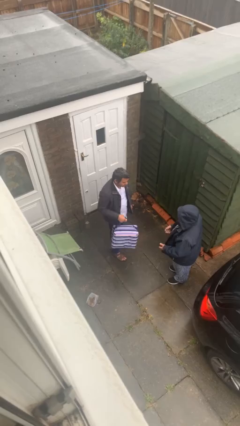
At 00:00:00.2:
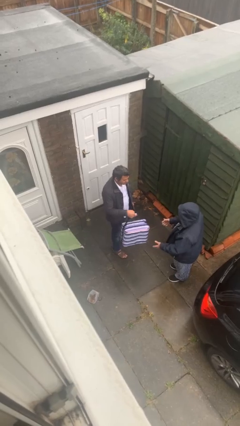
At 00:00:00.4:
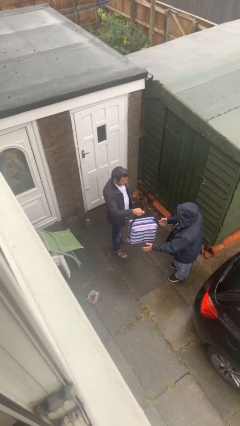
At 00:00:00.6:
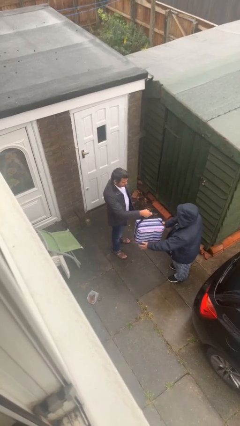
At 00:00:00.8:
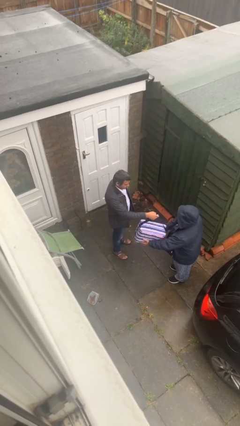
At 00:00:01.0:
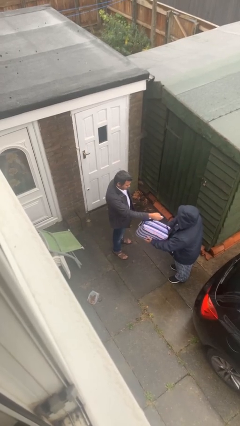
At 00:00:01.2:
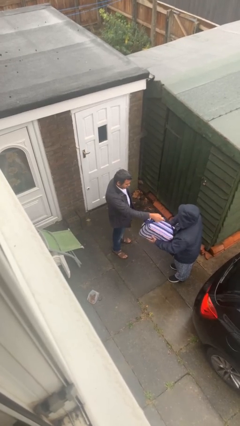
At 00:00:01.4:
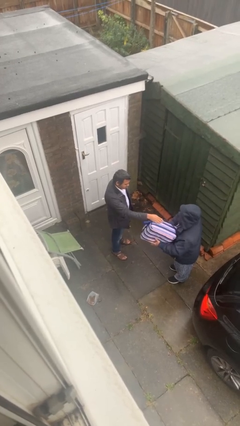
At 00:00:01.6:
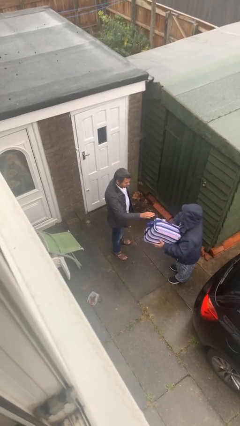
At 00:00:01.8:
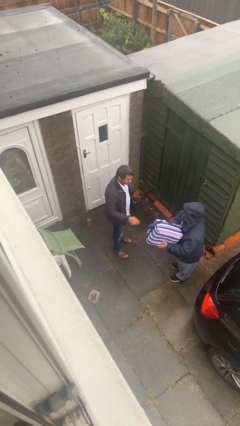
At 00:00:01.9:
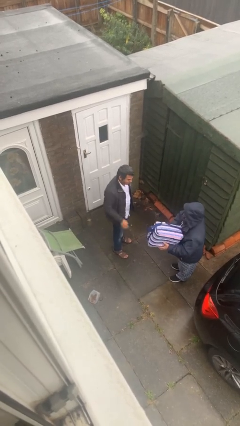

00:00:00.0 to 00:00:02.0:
person transfers object to person

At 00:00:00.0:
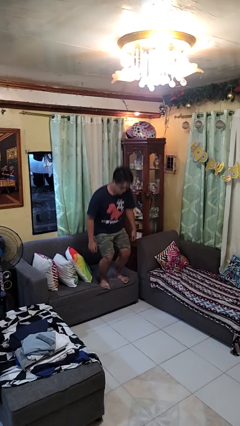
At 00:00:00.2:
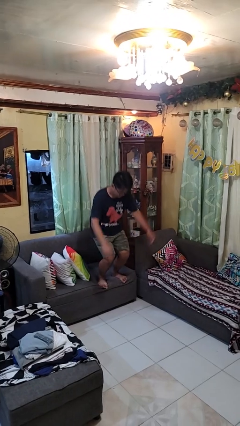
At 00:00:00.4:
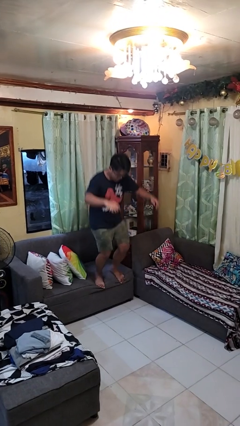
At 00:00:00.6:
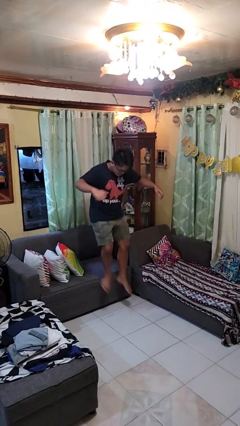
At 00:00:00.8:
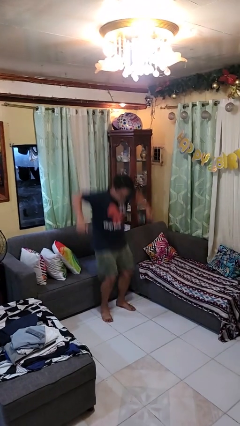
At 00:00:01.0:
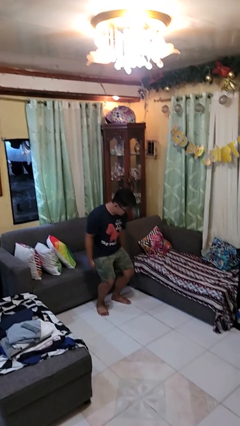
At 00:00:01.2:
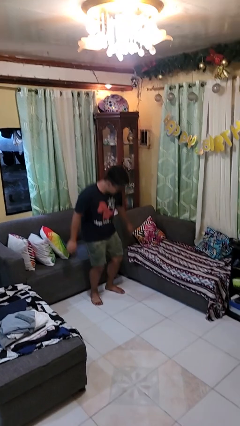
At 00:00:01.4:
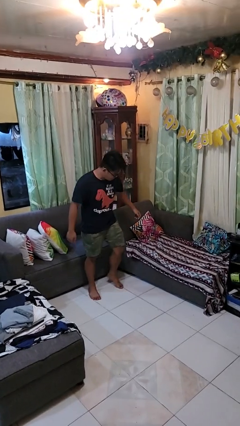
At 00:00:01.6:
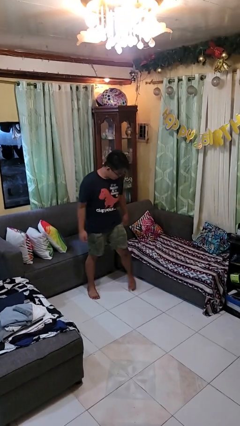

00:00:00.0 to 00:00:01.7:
person jumps on couch

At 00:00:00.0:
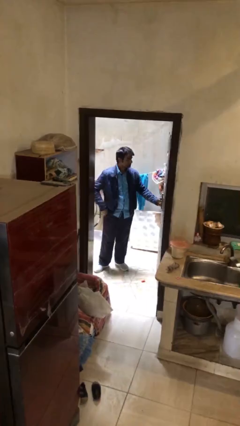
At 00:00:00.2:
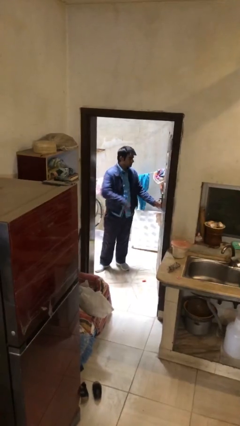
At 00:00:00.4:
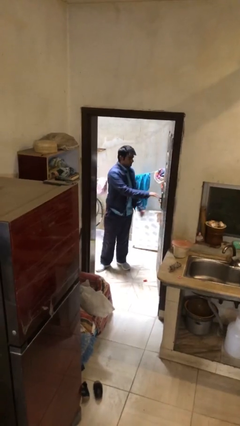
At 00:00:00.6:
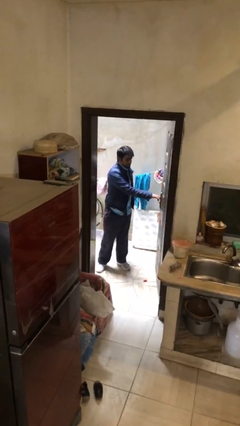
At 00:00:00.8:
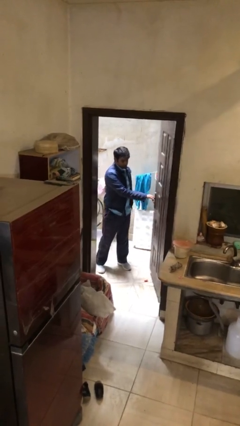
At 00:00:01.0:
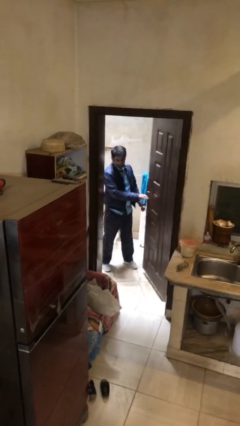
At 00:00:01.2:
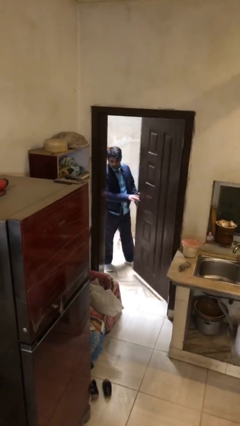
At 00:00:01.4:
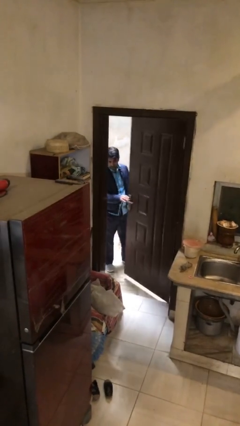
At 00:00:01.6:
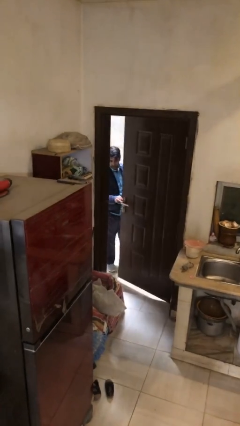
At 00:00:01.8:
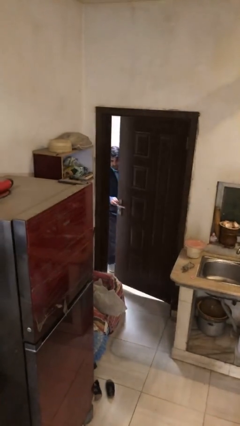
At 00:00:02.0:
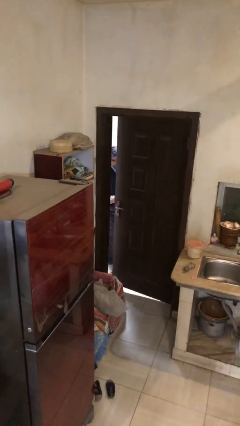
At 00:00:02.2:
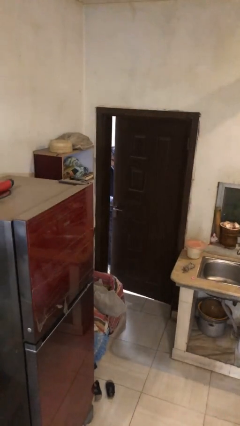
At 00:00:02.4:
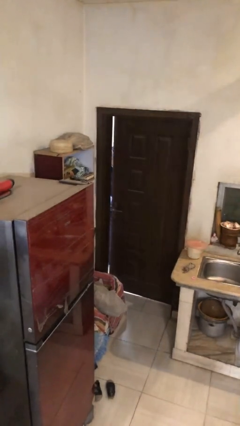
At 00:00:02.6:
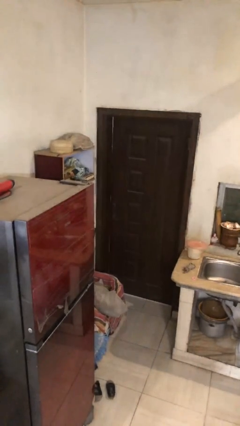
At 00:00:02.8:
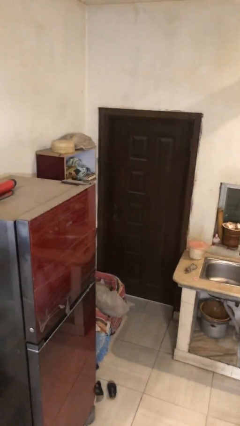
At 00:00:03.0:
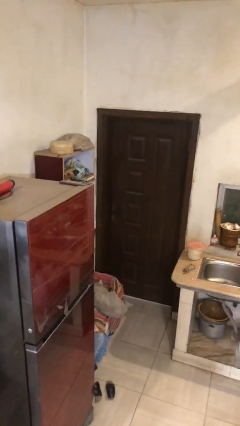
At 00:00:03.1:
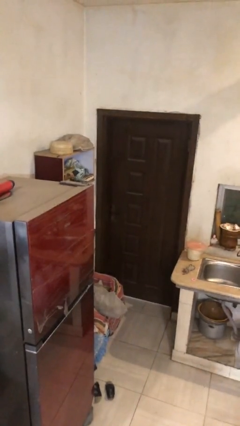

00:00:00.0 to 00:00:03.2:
person closes facility door

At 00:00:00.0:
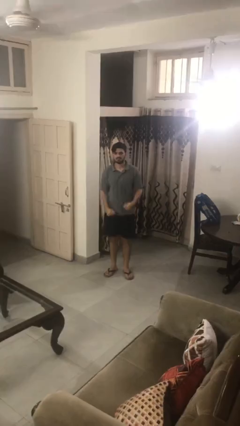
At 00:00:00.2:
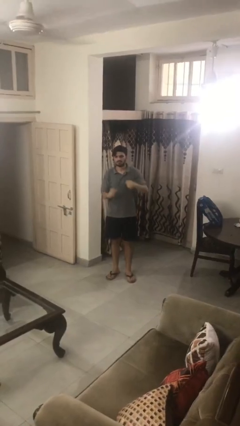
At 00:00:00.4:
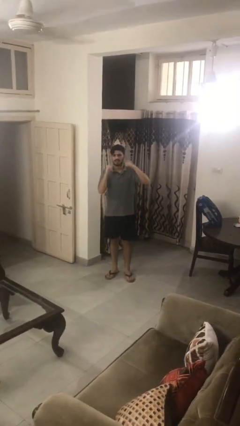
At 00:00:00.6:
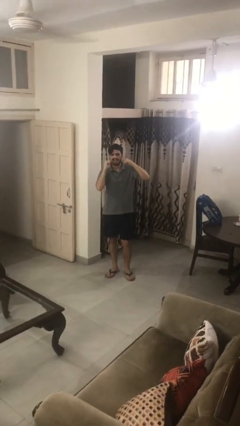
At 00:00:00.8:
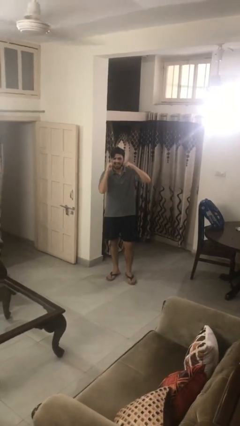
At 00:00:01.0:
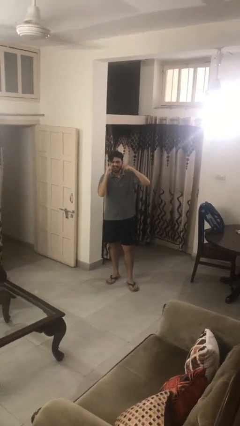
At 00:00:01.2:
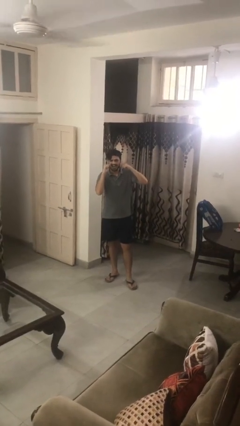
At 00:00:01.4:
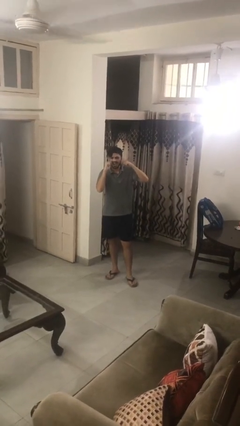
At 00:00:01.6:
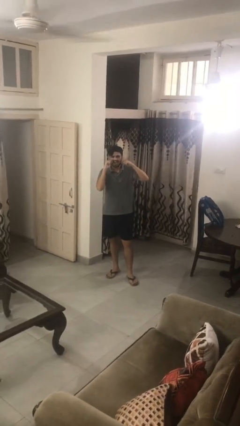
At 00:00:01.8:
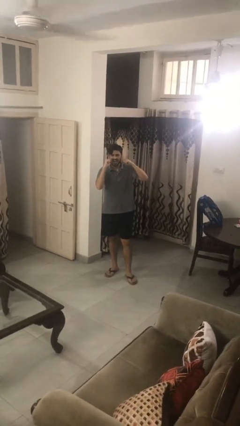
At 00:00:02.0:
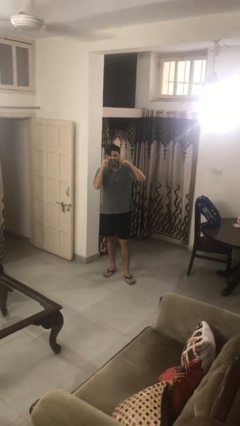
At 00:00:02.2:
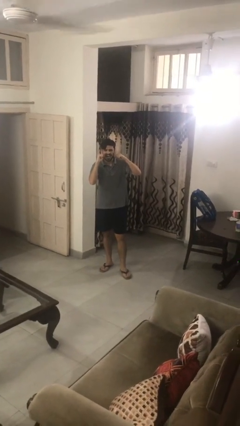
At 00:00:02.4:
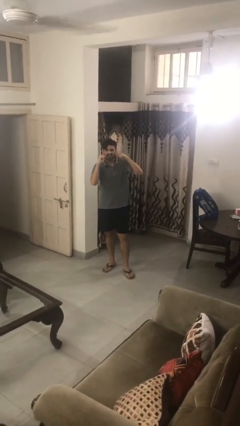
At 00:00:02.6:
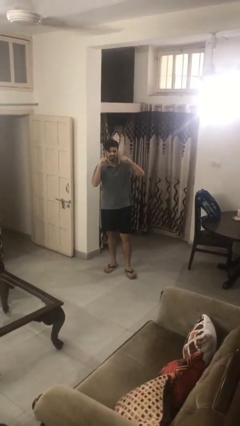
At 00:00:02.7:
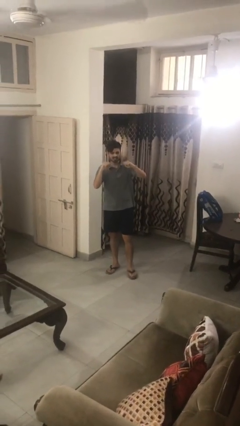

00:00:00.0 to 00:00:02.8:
person flosses

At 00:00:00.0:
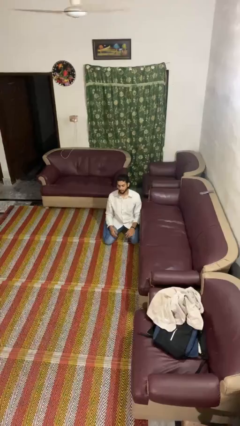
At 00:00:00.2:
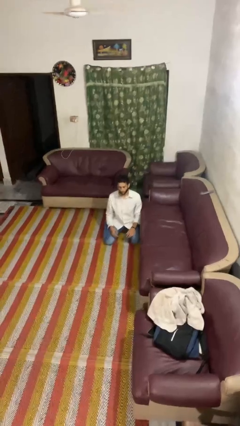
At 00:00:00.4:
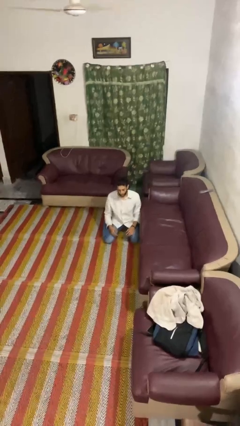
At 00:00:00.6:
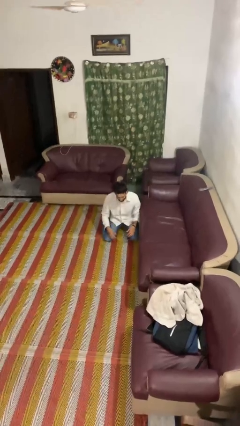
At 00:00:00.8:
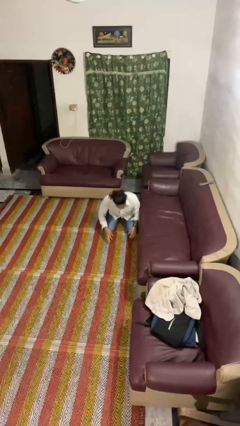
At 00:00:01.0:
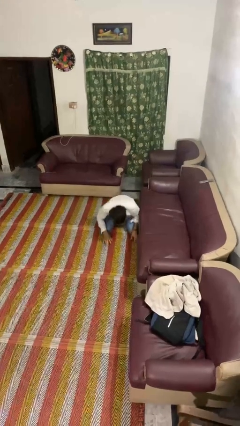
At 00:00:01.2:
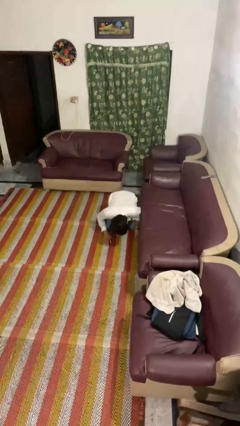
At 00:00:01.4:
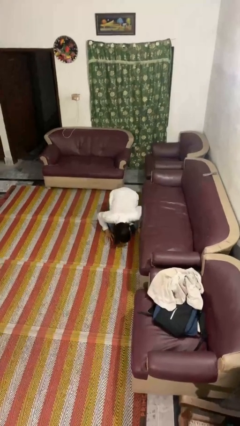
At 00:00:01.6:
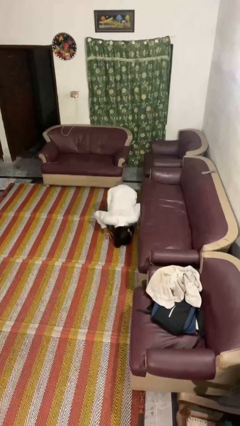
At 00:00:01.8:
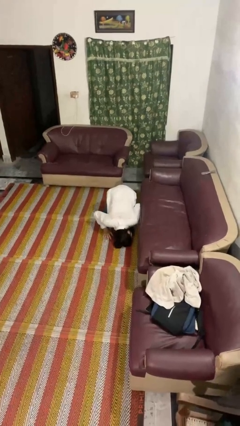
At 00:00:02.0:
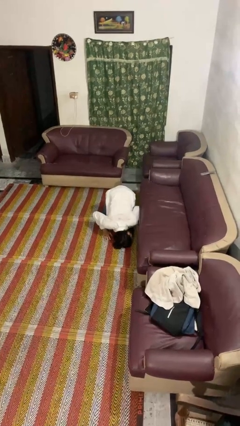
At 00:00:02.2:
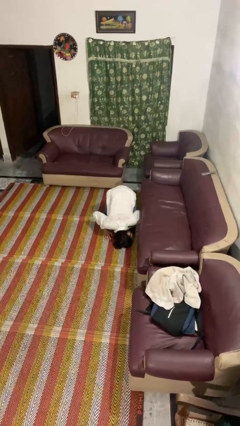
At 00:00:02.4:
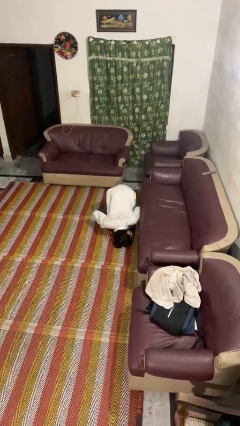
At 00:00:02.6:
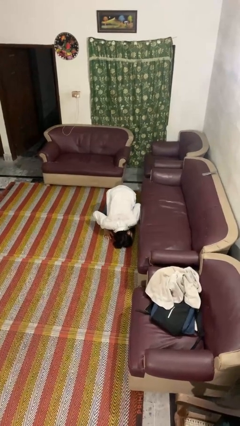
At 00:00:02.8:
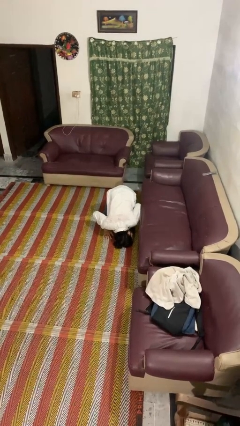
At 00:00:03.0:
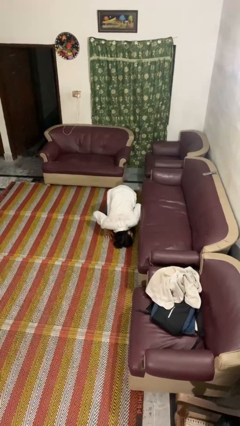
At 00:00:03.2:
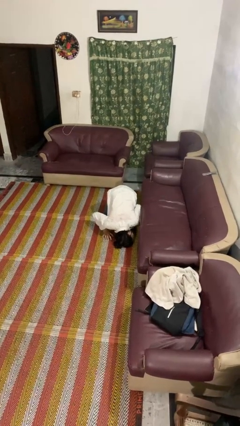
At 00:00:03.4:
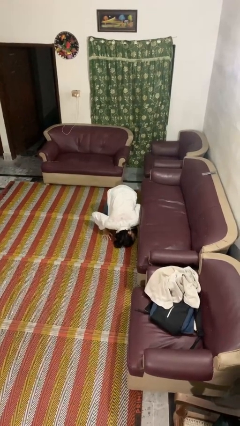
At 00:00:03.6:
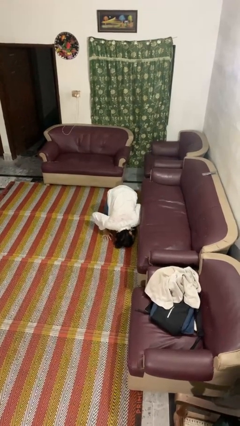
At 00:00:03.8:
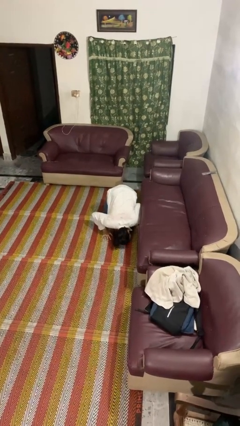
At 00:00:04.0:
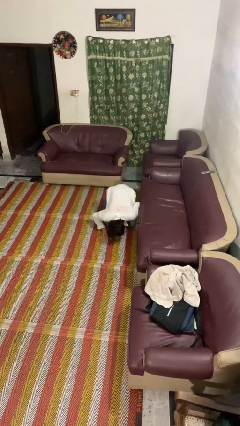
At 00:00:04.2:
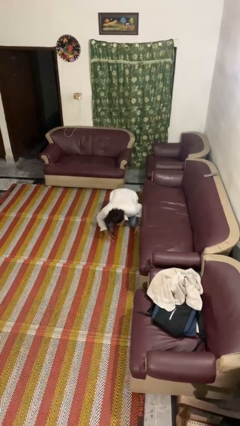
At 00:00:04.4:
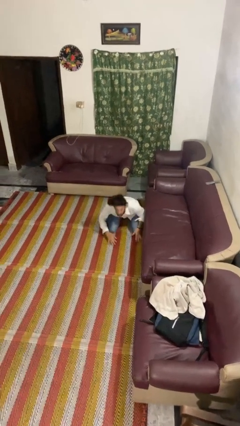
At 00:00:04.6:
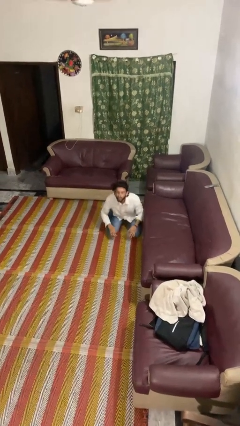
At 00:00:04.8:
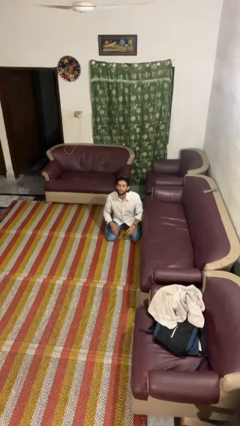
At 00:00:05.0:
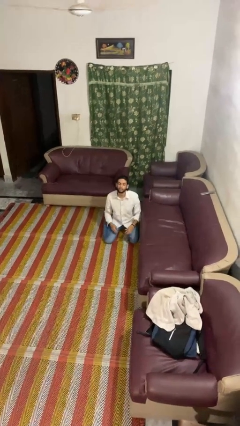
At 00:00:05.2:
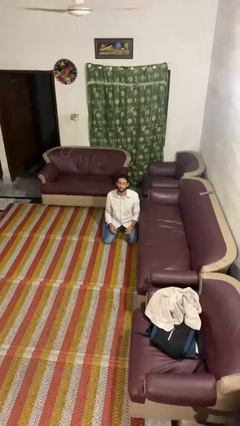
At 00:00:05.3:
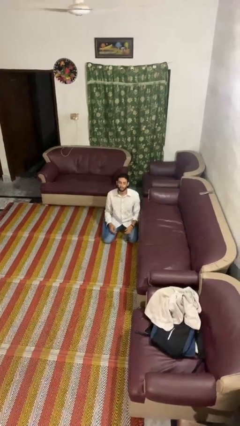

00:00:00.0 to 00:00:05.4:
person searches under couch

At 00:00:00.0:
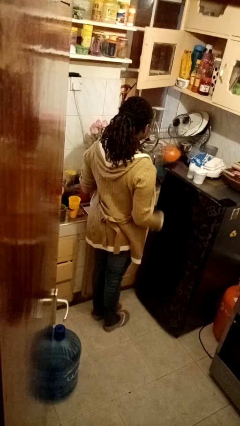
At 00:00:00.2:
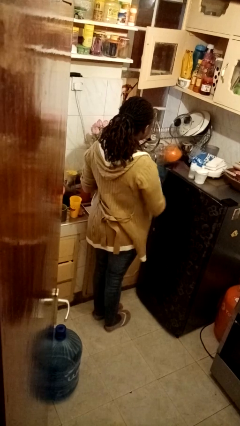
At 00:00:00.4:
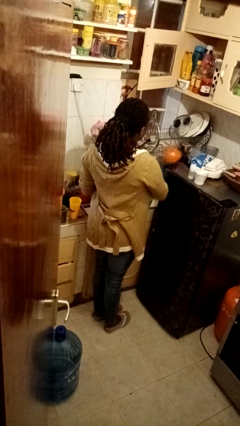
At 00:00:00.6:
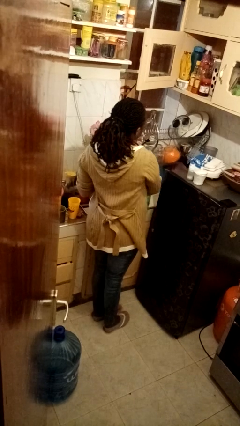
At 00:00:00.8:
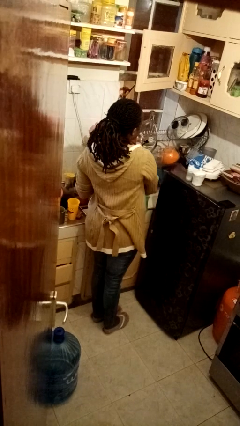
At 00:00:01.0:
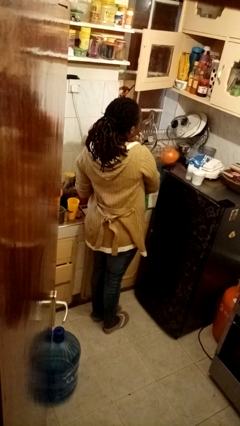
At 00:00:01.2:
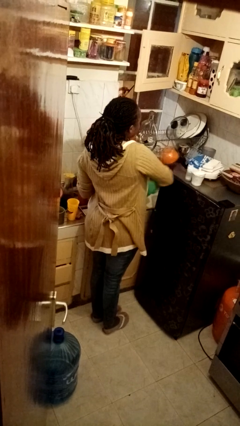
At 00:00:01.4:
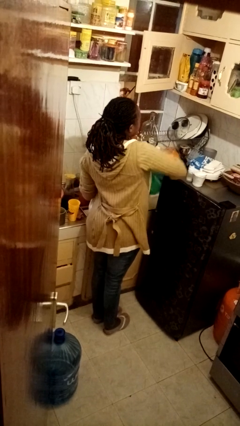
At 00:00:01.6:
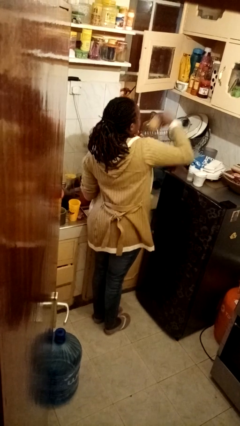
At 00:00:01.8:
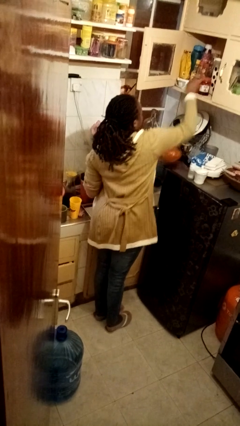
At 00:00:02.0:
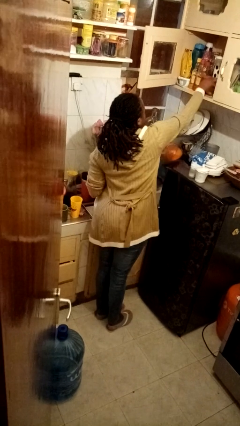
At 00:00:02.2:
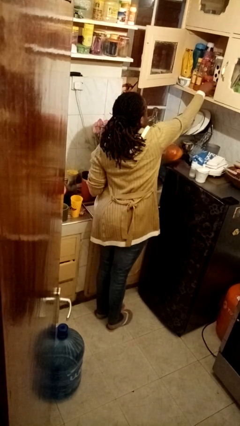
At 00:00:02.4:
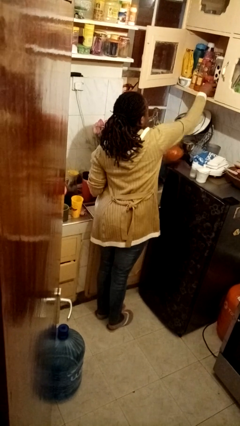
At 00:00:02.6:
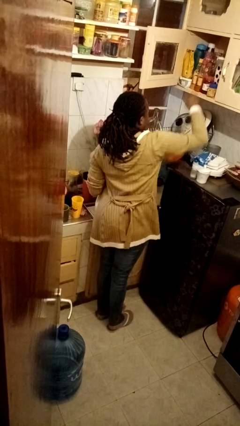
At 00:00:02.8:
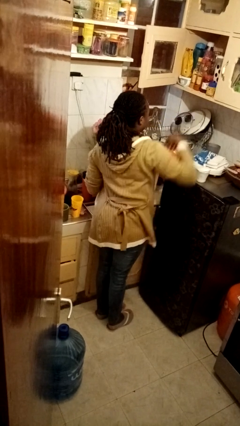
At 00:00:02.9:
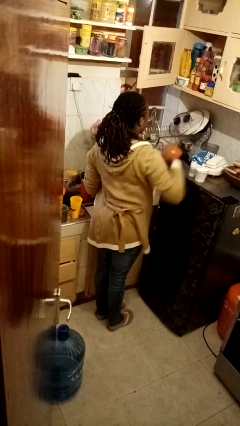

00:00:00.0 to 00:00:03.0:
person loads groceries into cabinet
